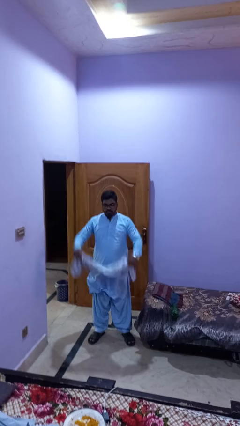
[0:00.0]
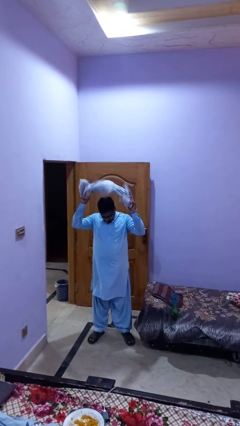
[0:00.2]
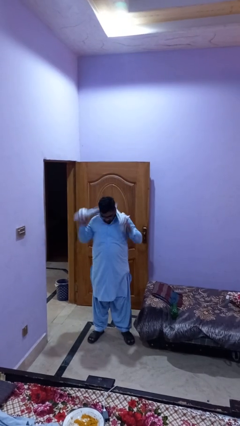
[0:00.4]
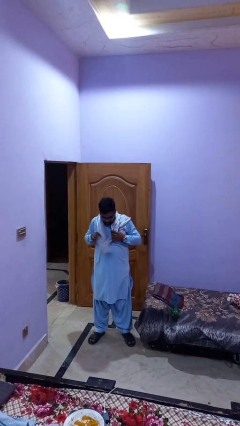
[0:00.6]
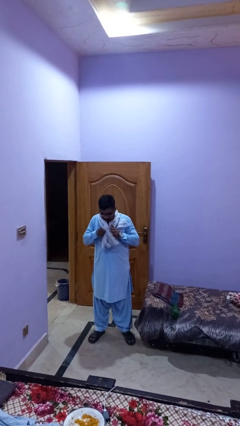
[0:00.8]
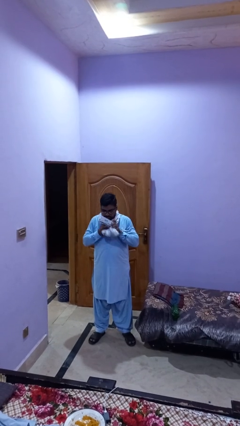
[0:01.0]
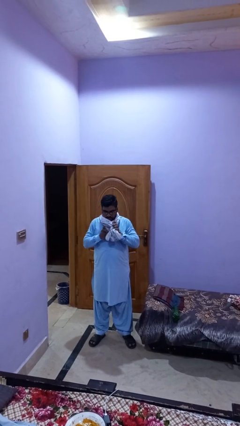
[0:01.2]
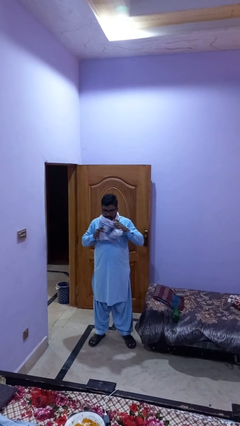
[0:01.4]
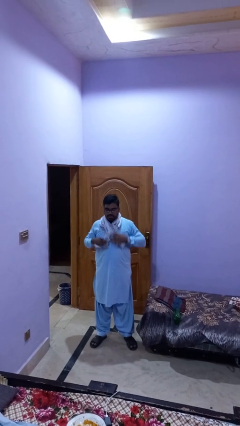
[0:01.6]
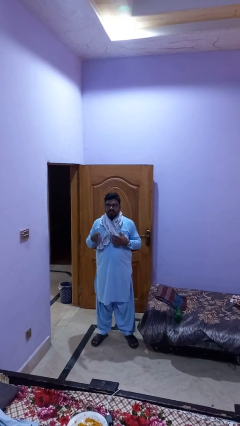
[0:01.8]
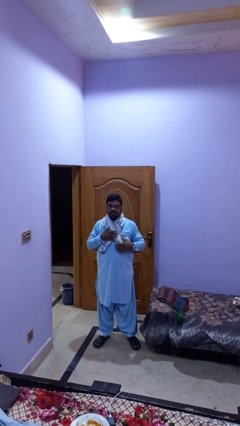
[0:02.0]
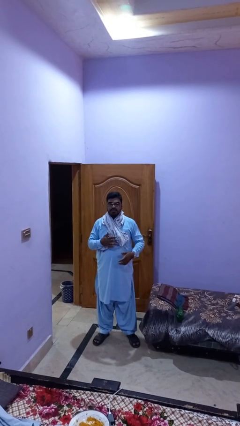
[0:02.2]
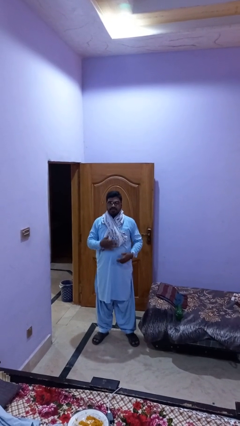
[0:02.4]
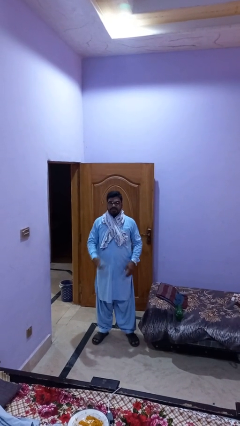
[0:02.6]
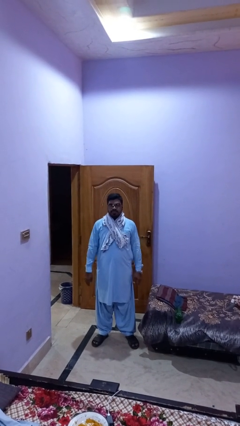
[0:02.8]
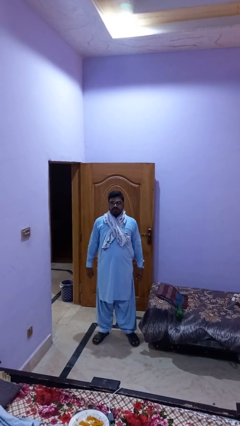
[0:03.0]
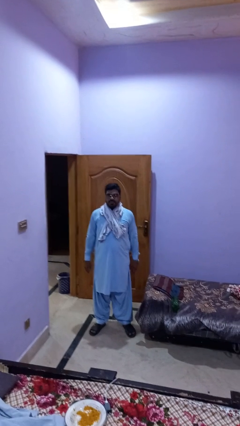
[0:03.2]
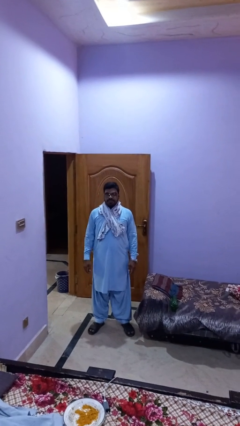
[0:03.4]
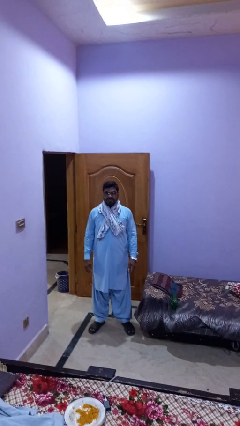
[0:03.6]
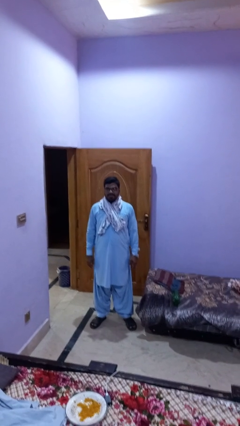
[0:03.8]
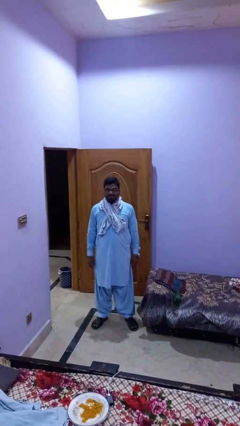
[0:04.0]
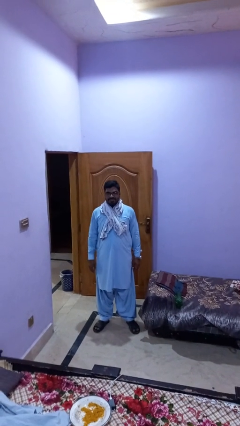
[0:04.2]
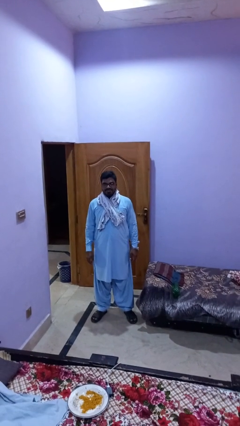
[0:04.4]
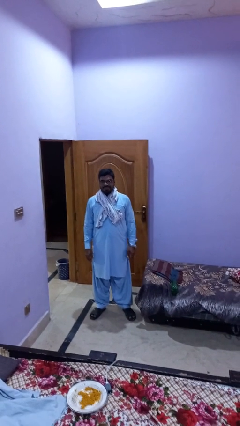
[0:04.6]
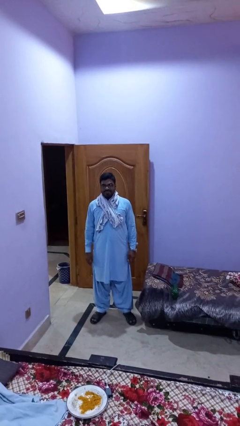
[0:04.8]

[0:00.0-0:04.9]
person puts on scarf

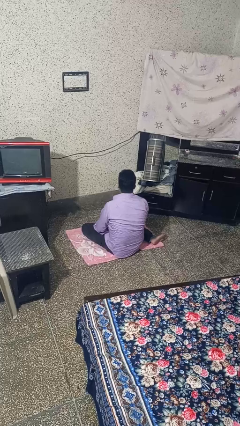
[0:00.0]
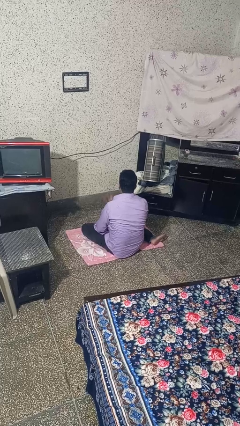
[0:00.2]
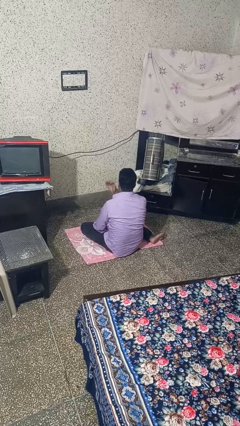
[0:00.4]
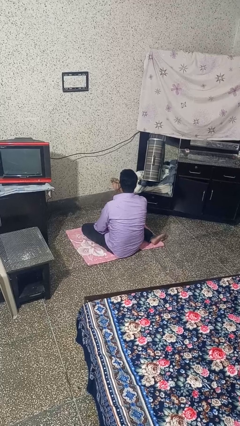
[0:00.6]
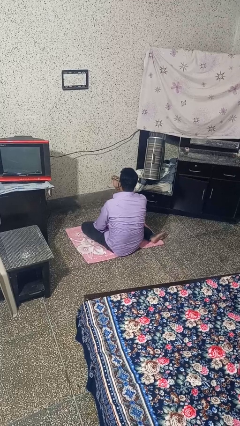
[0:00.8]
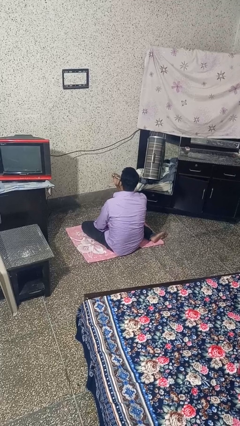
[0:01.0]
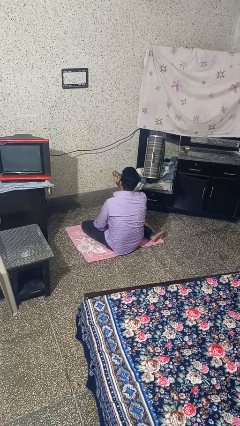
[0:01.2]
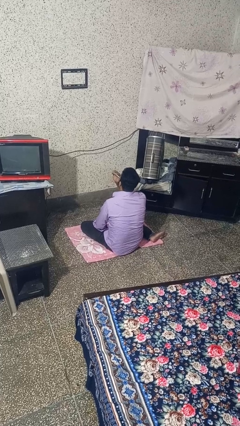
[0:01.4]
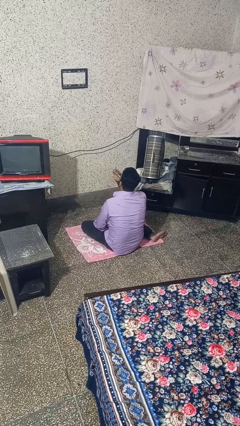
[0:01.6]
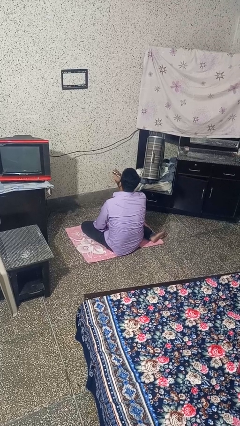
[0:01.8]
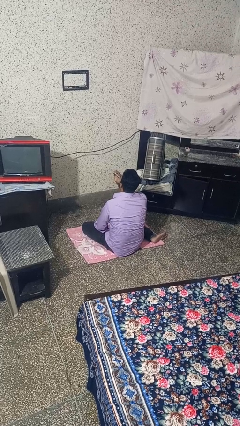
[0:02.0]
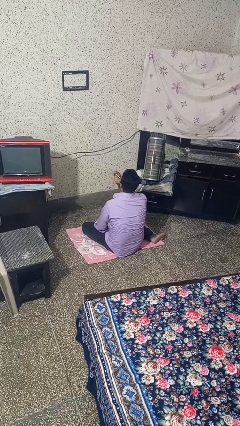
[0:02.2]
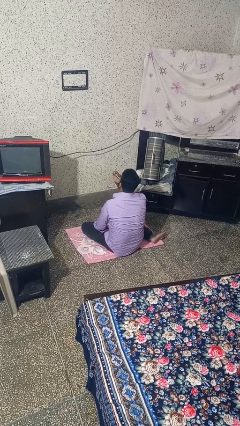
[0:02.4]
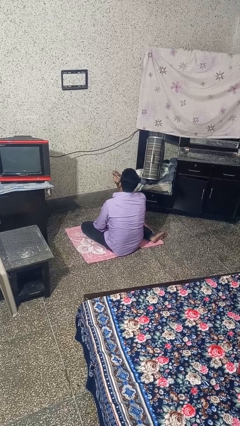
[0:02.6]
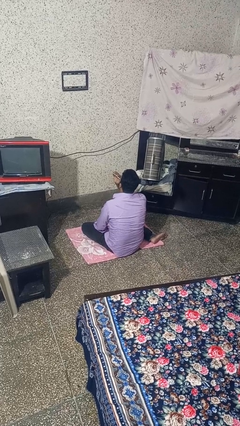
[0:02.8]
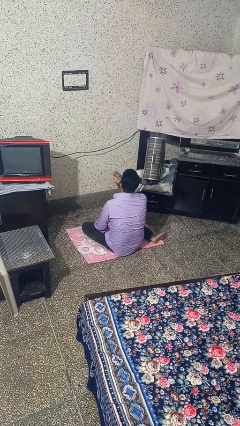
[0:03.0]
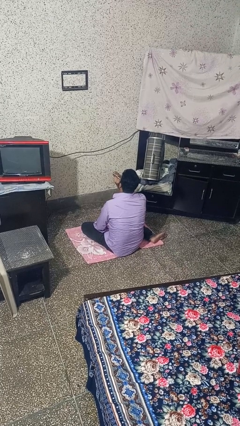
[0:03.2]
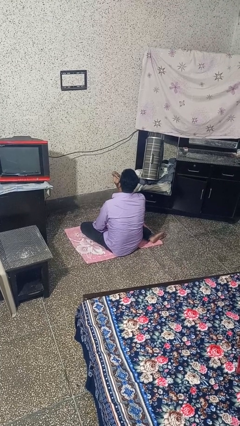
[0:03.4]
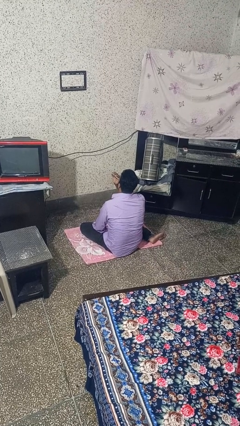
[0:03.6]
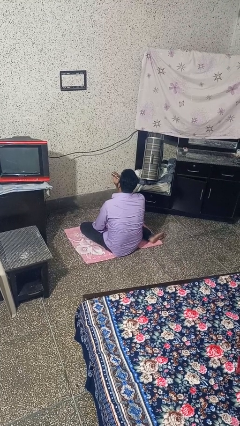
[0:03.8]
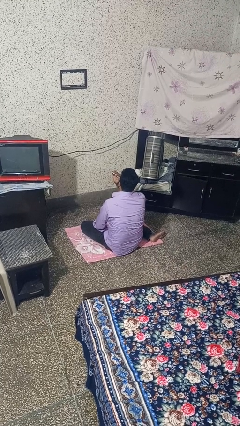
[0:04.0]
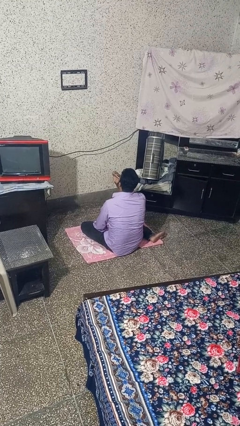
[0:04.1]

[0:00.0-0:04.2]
person vapes

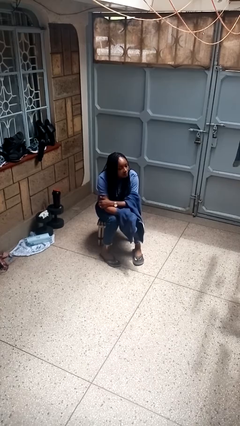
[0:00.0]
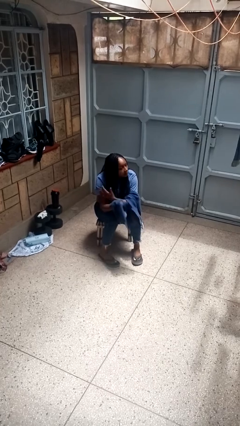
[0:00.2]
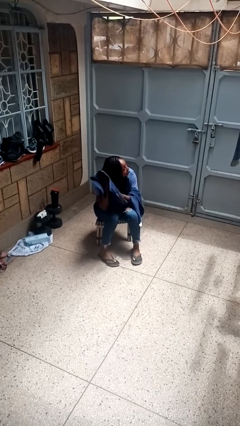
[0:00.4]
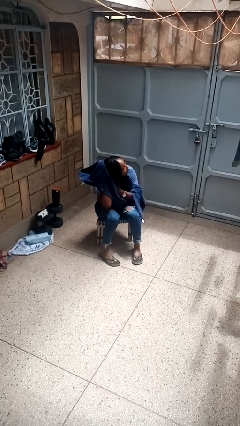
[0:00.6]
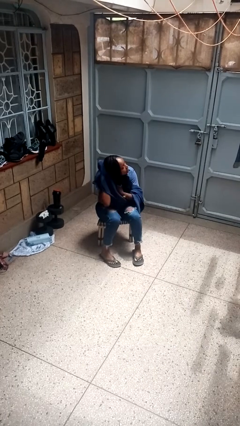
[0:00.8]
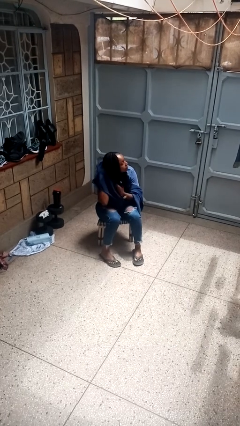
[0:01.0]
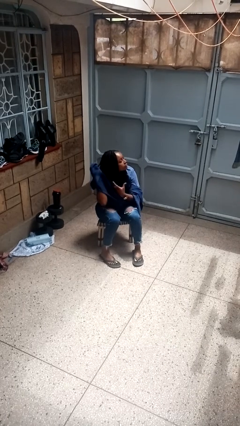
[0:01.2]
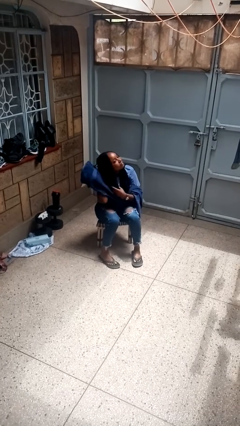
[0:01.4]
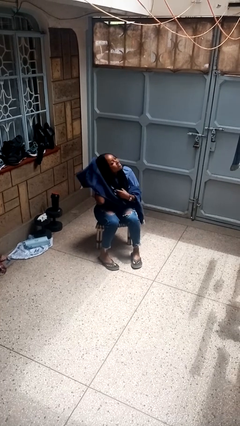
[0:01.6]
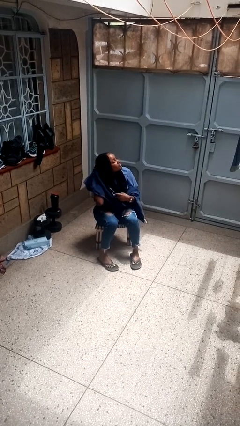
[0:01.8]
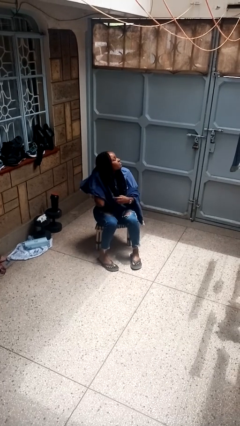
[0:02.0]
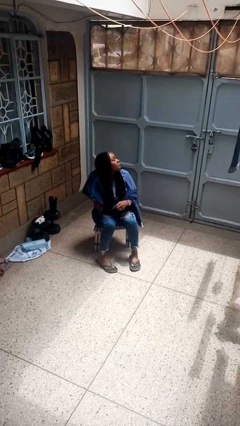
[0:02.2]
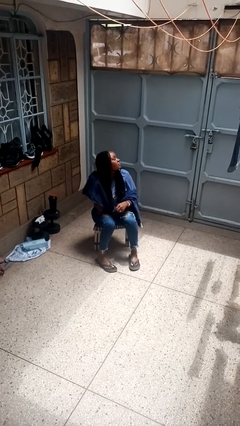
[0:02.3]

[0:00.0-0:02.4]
person dries hair with towel

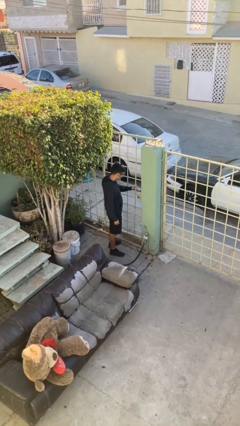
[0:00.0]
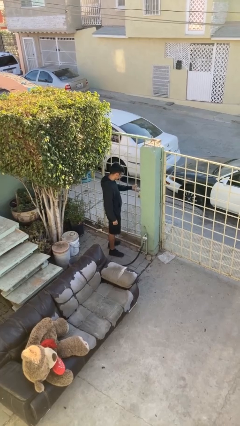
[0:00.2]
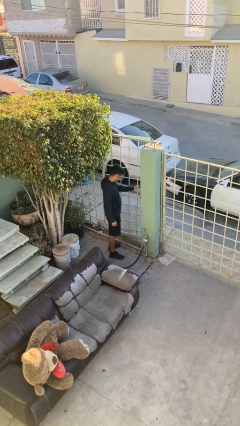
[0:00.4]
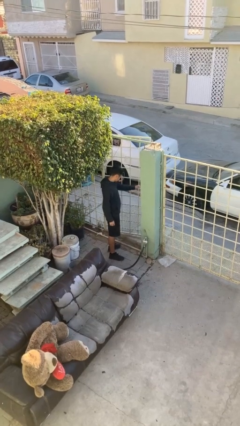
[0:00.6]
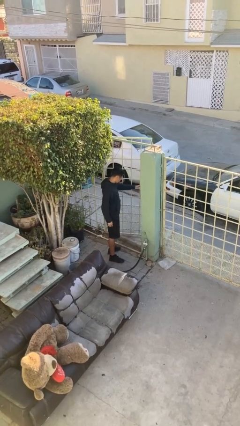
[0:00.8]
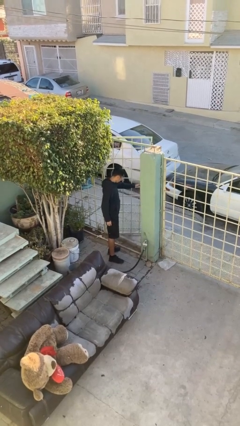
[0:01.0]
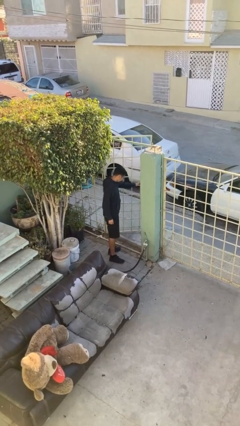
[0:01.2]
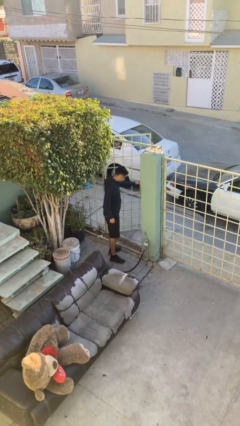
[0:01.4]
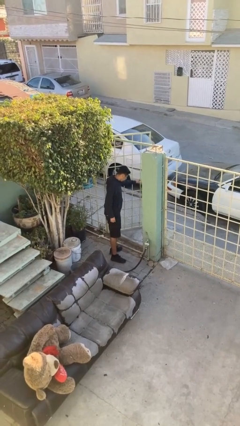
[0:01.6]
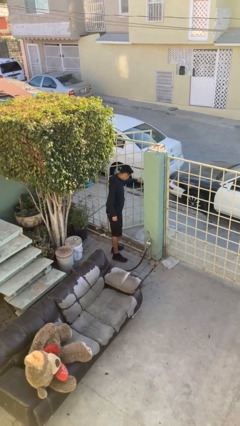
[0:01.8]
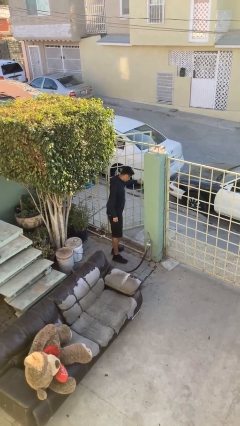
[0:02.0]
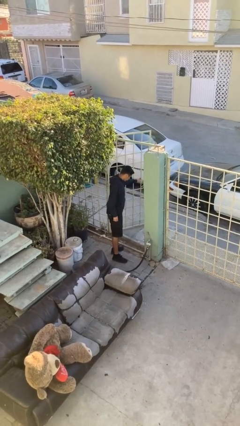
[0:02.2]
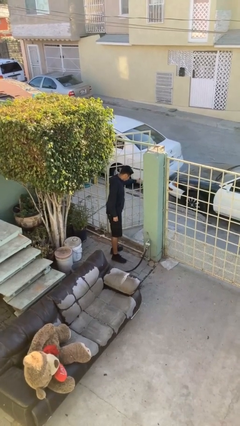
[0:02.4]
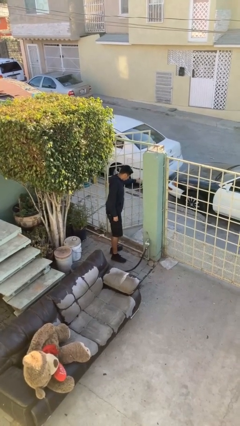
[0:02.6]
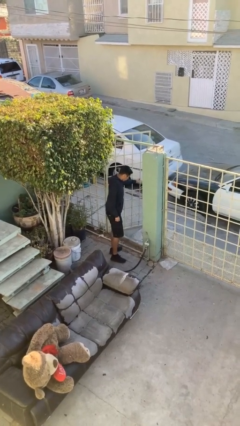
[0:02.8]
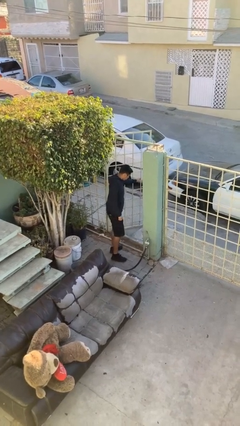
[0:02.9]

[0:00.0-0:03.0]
person opens facility door

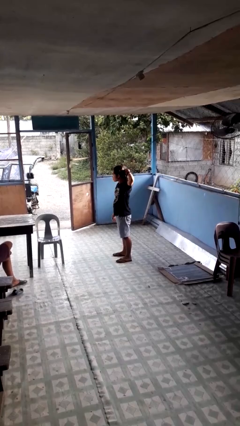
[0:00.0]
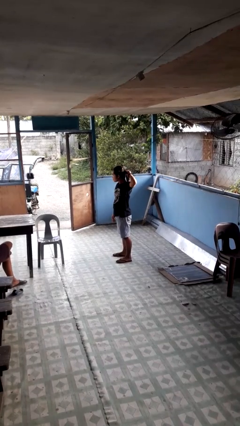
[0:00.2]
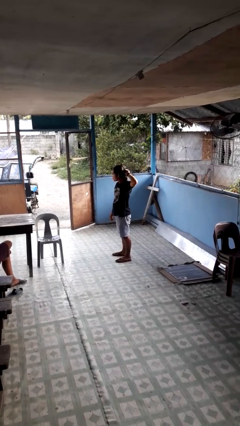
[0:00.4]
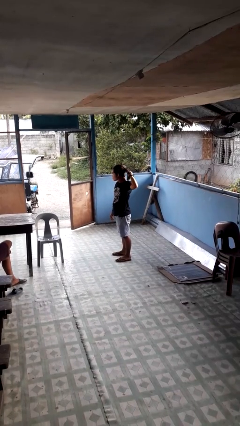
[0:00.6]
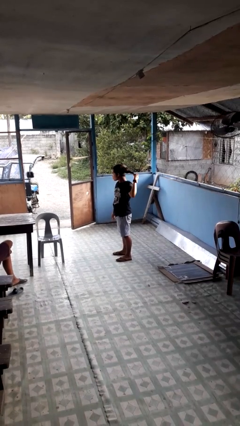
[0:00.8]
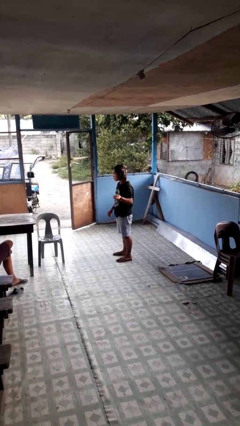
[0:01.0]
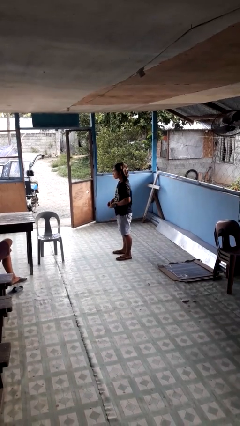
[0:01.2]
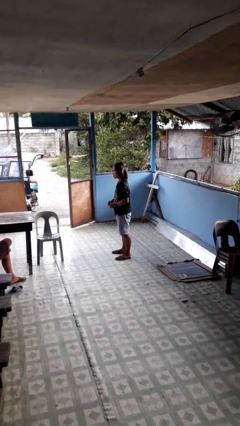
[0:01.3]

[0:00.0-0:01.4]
person takes off hairtie

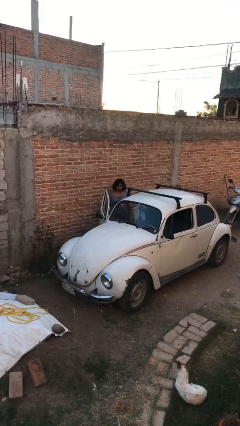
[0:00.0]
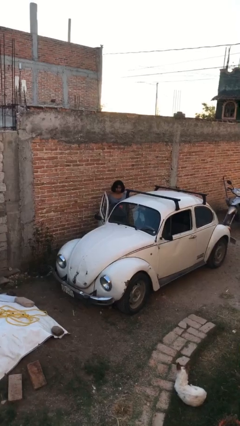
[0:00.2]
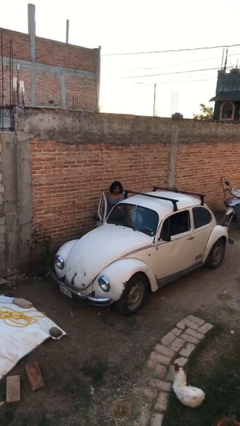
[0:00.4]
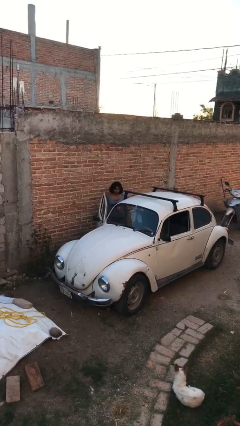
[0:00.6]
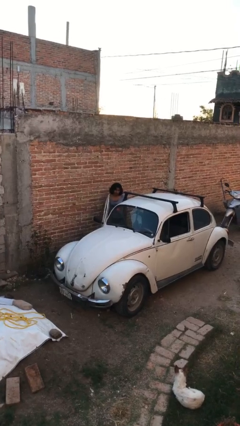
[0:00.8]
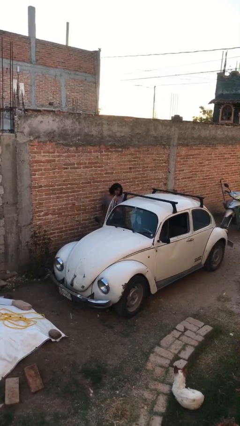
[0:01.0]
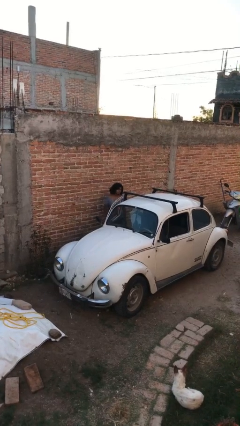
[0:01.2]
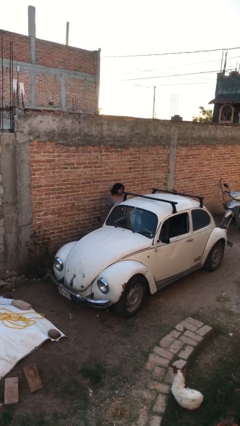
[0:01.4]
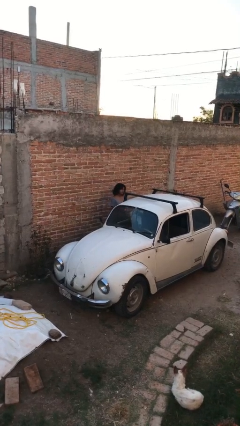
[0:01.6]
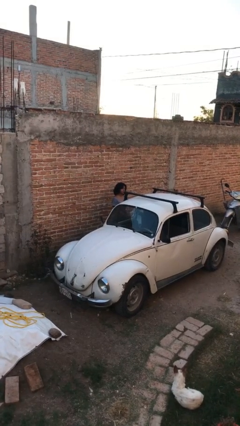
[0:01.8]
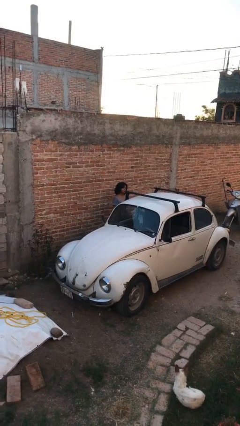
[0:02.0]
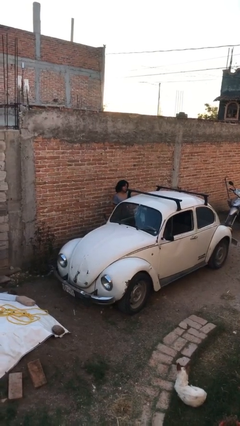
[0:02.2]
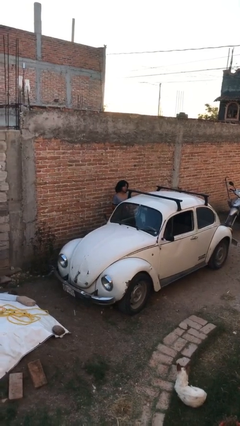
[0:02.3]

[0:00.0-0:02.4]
person closes car door
